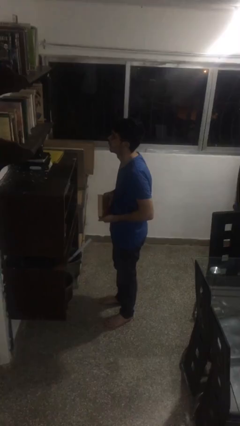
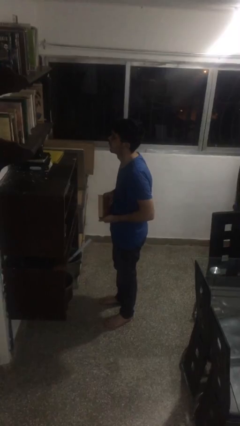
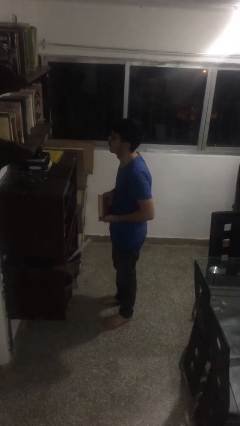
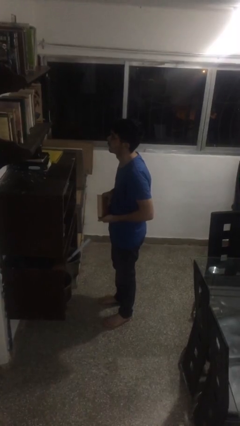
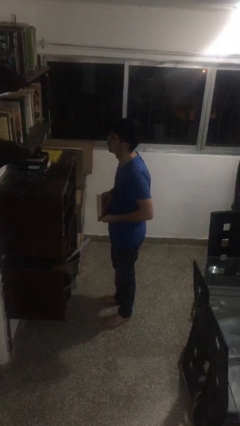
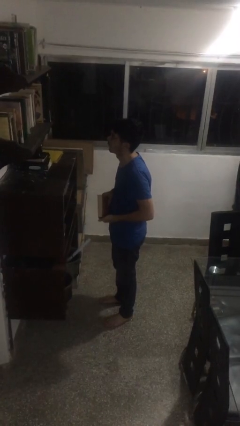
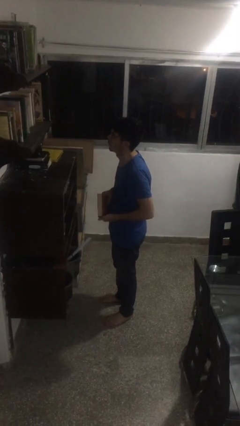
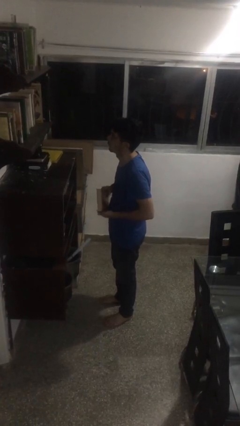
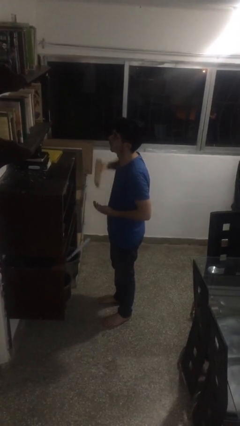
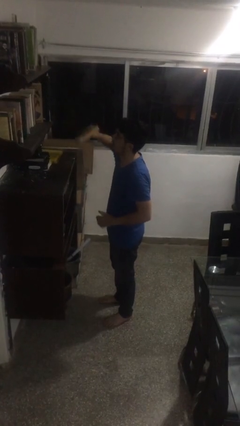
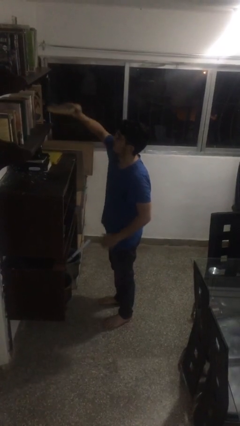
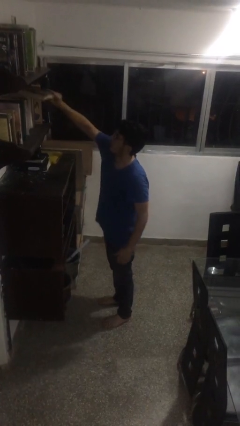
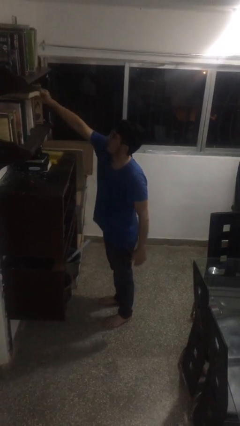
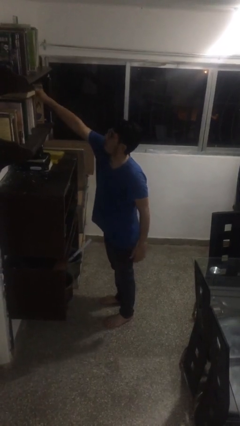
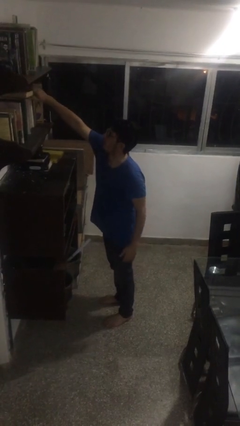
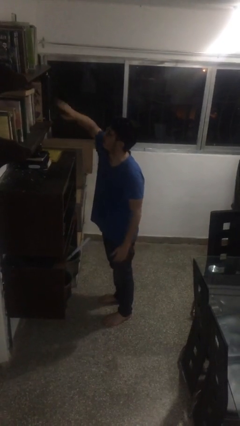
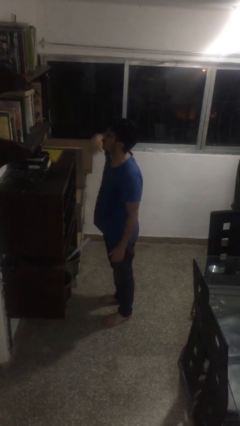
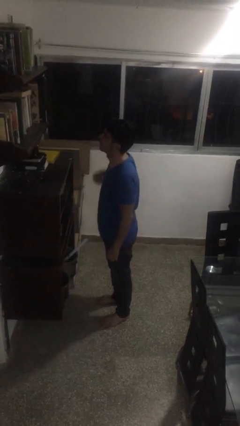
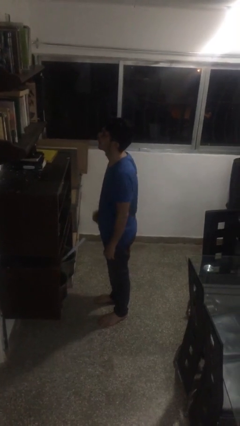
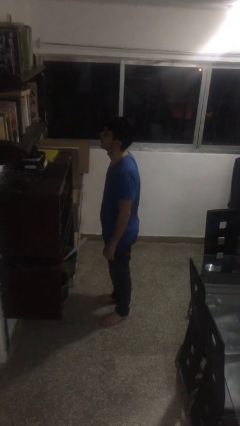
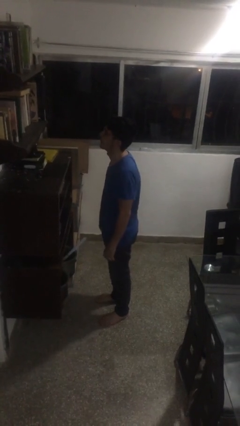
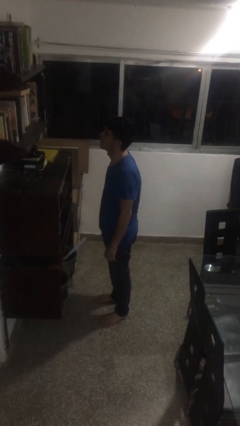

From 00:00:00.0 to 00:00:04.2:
person puts down object on shelf

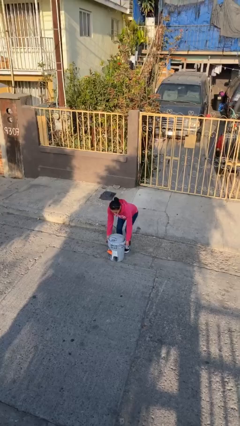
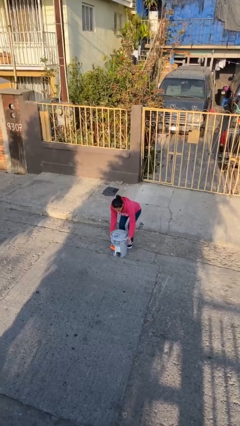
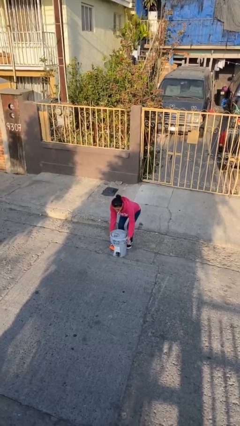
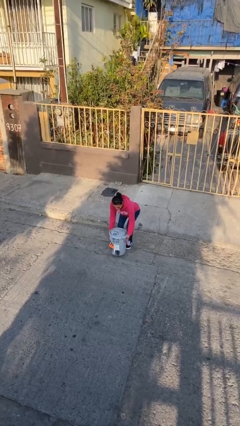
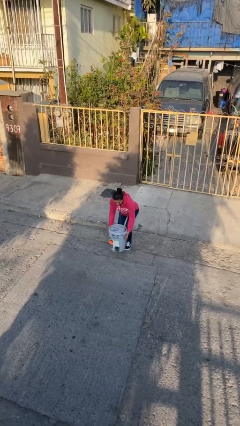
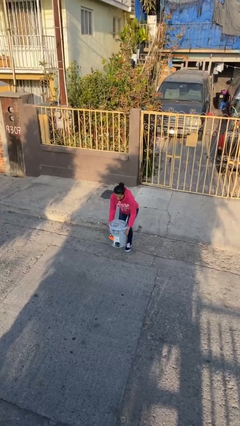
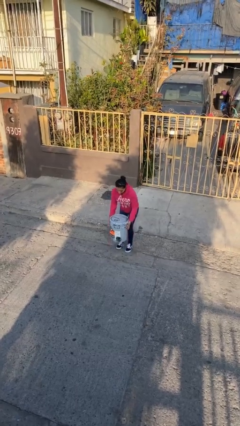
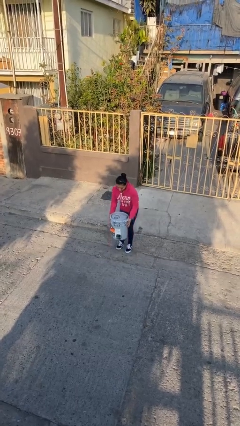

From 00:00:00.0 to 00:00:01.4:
person picks up object from floor

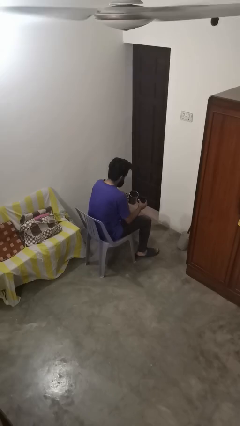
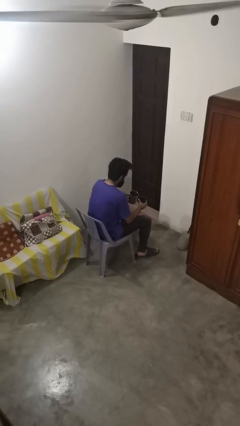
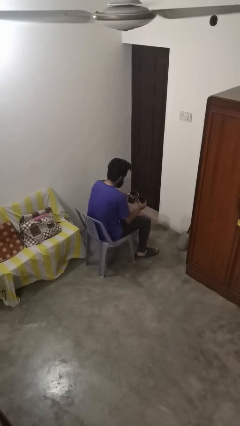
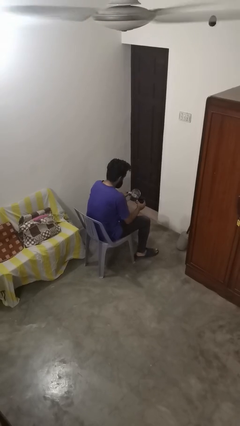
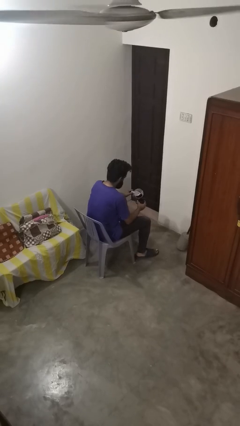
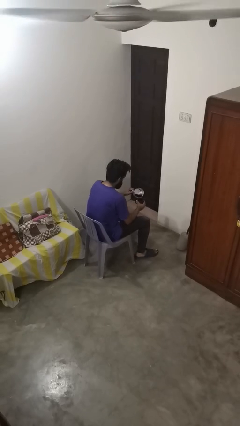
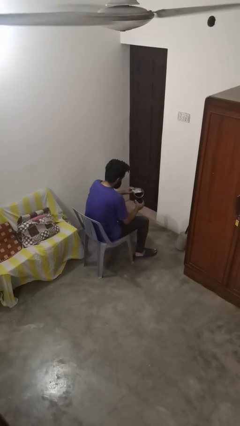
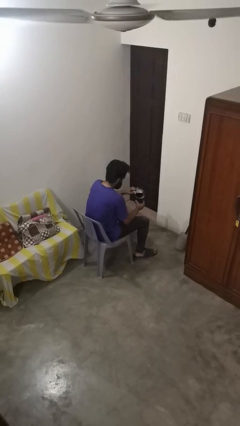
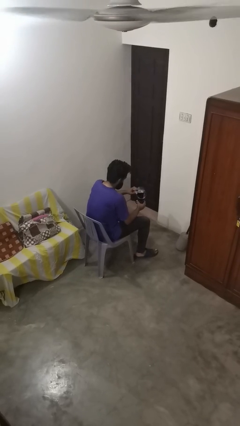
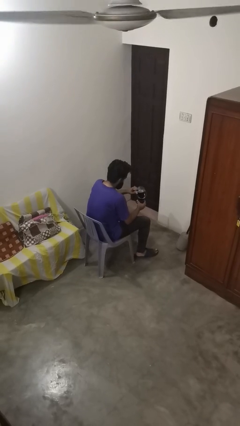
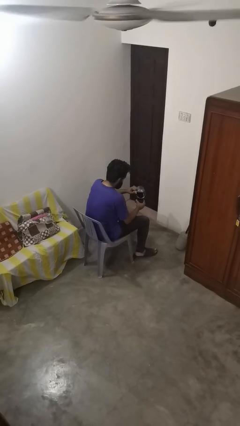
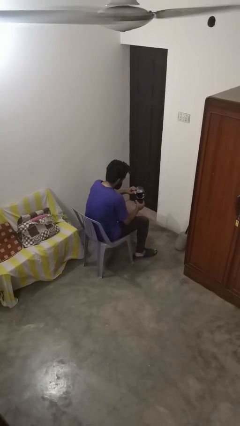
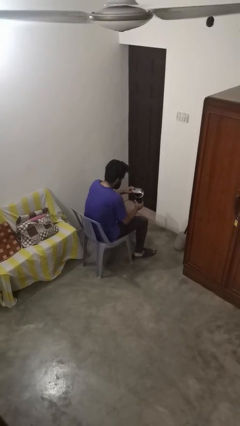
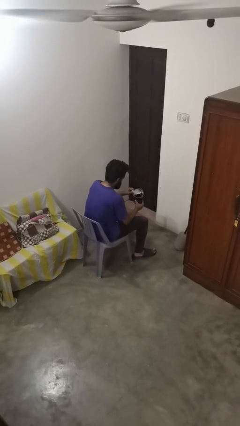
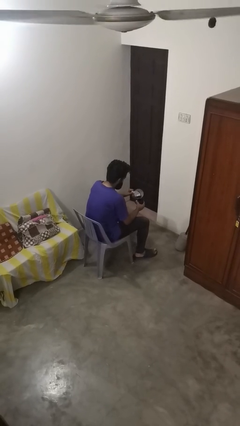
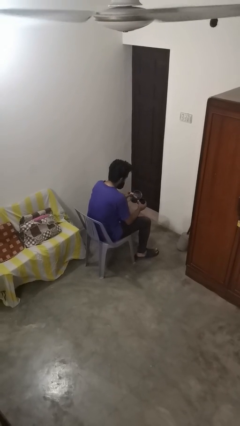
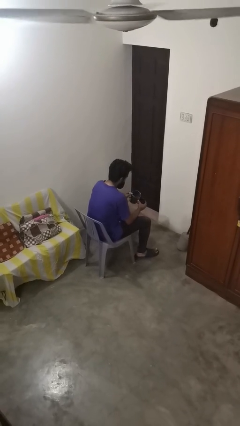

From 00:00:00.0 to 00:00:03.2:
person pours coffee into mug

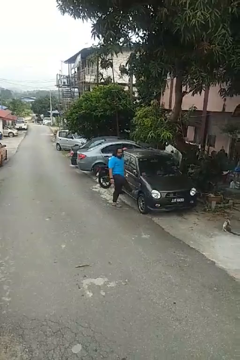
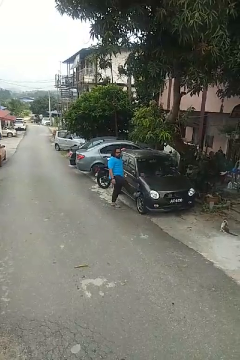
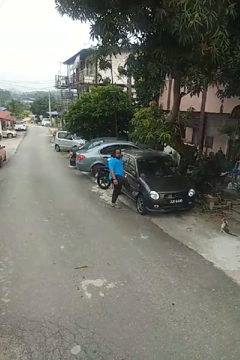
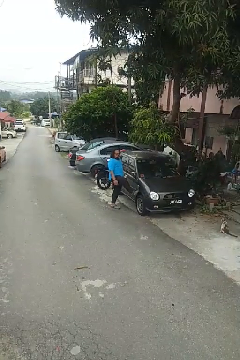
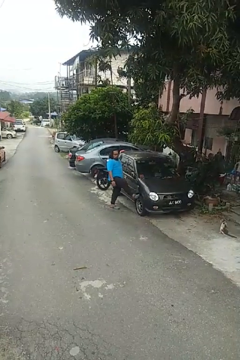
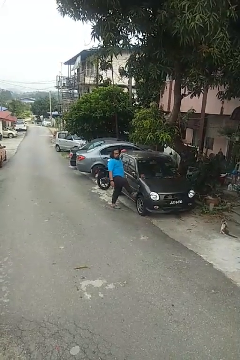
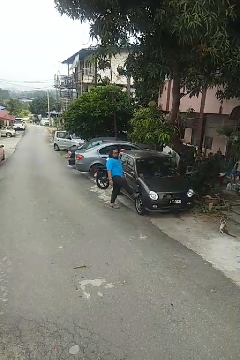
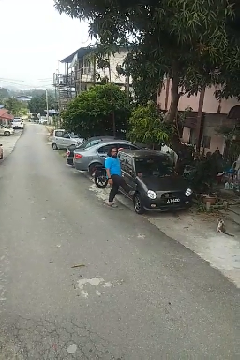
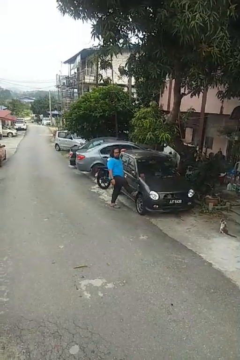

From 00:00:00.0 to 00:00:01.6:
person kicks car tires

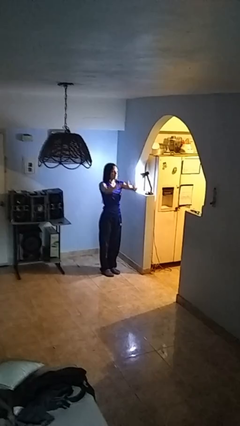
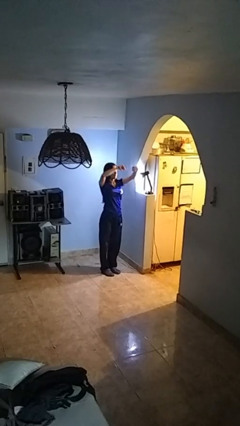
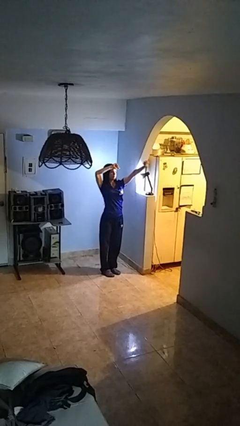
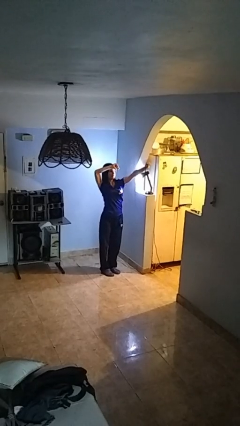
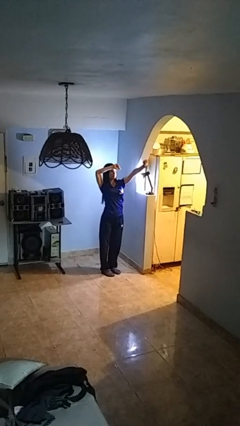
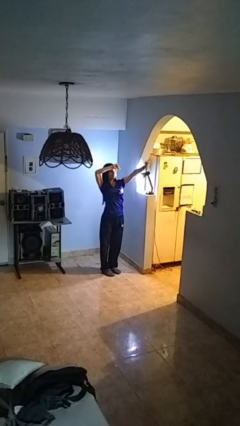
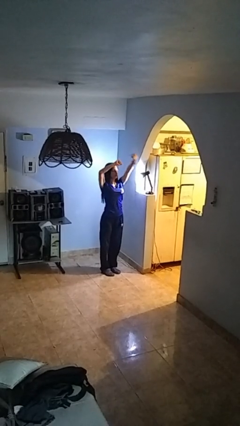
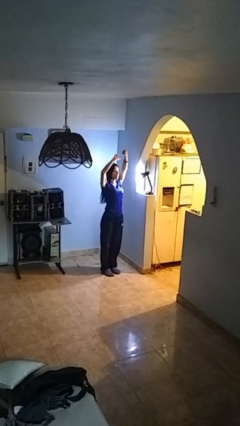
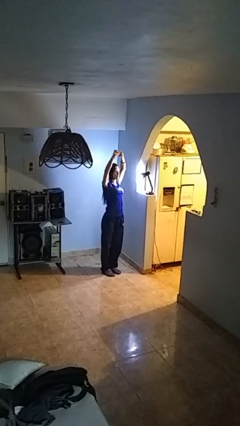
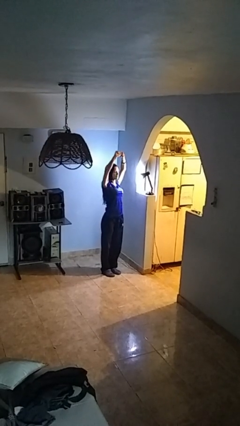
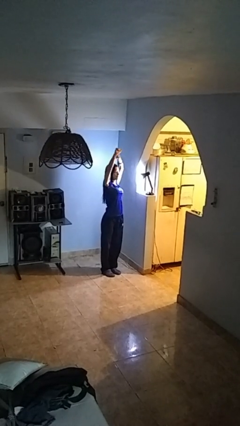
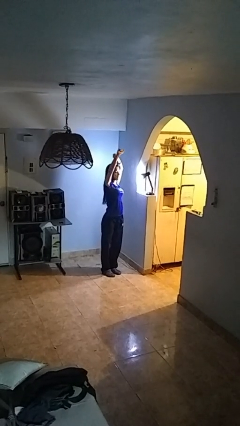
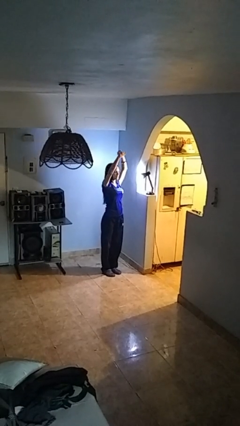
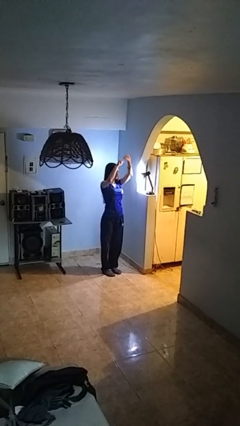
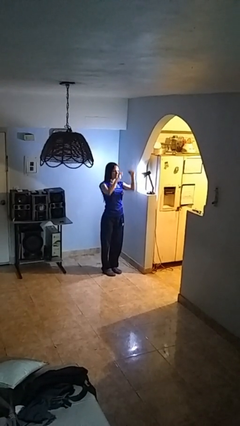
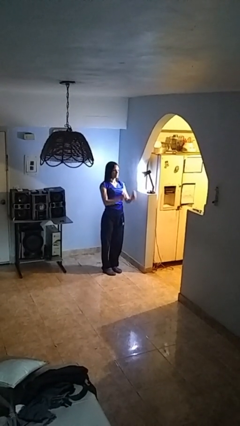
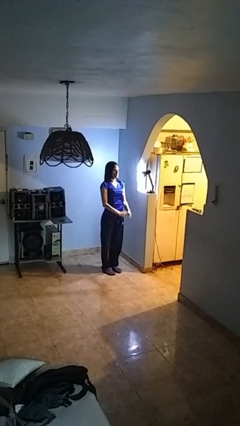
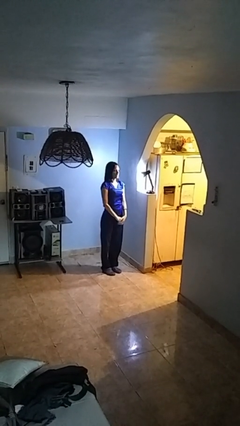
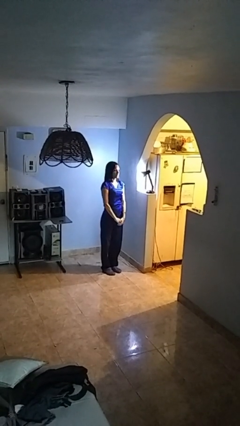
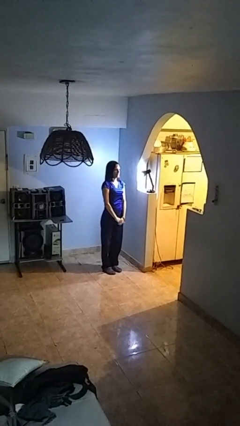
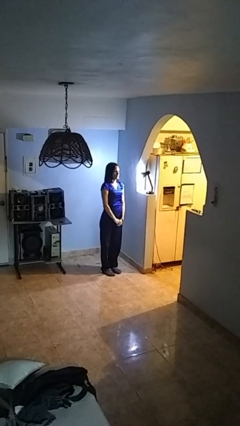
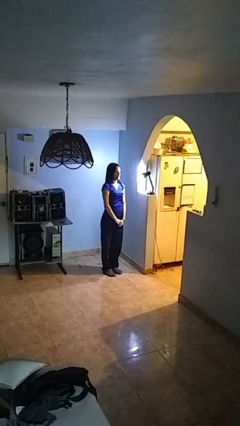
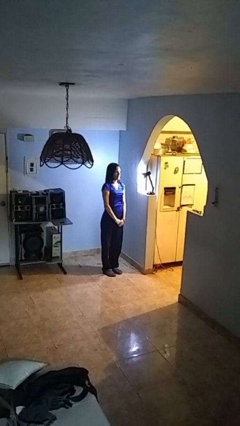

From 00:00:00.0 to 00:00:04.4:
person stretches arms over head

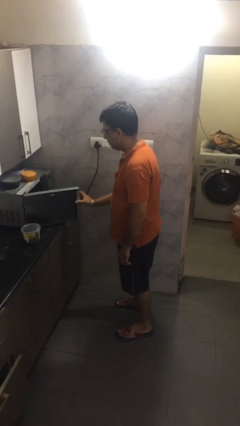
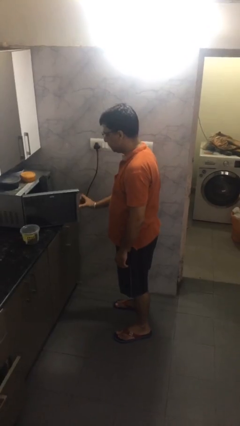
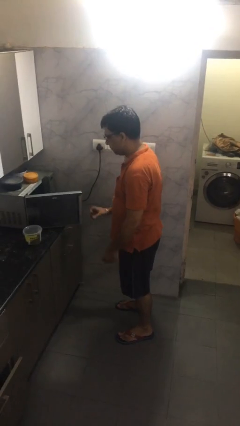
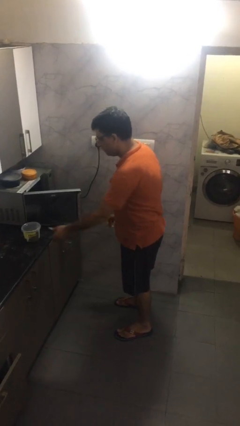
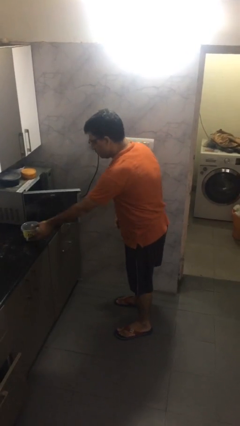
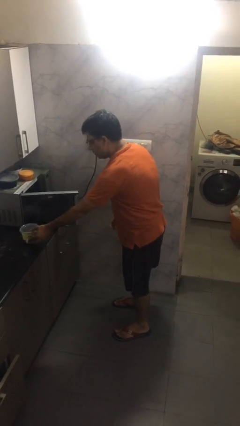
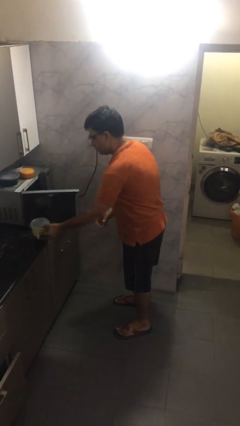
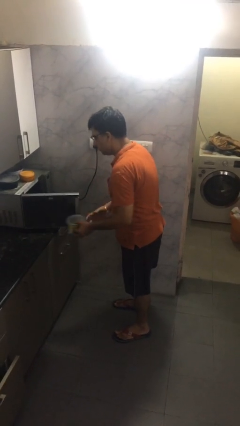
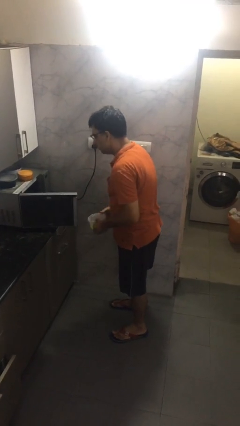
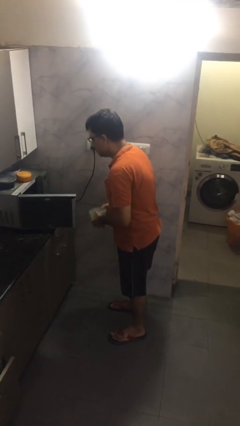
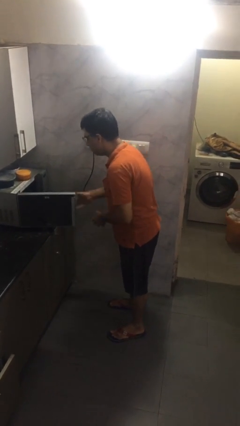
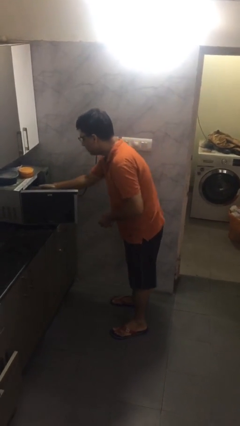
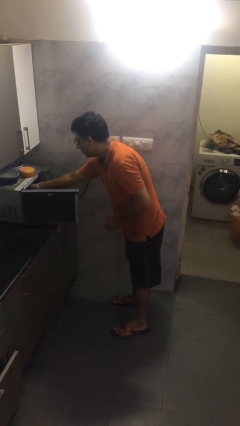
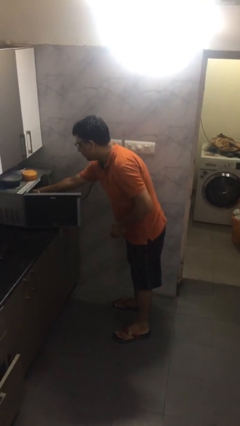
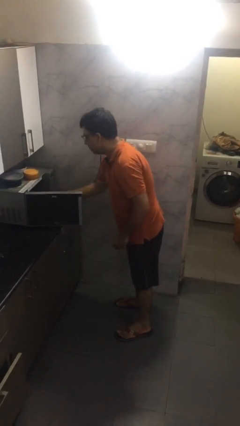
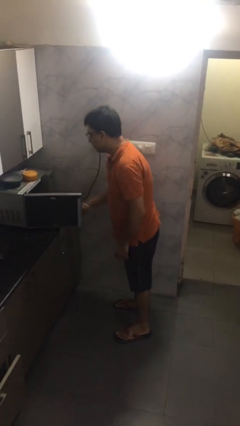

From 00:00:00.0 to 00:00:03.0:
person puts object into microwave
